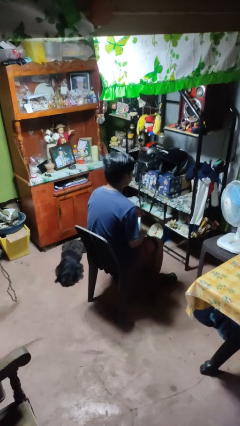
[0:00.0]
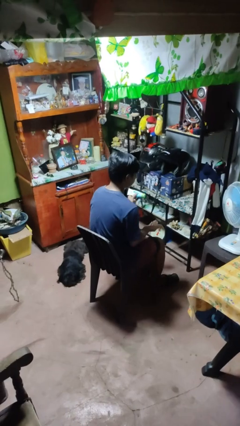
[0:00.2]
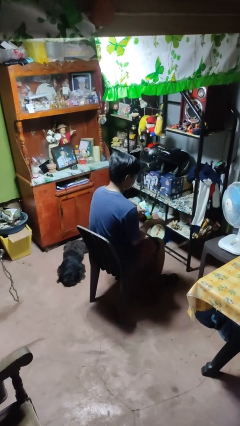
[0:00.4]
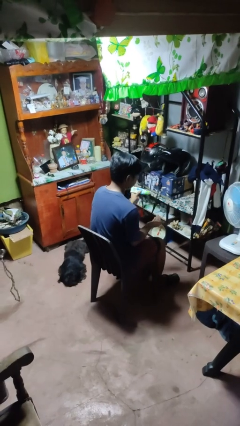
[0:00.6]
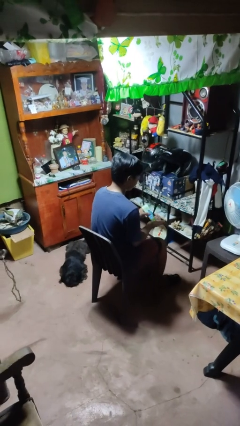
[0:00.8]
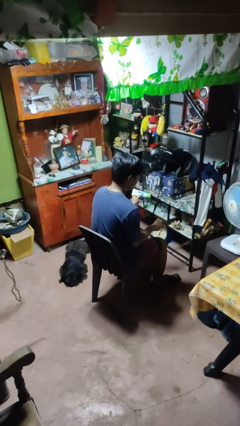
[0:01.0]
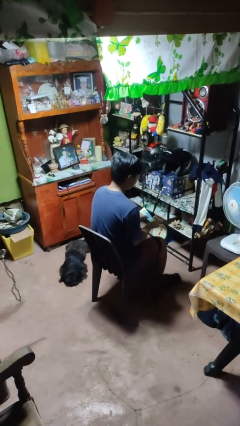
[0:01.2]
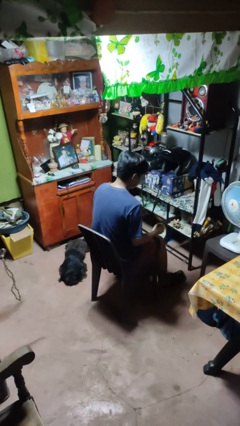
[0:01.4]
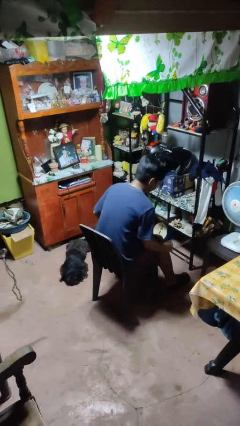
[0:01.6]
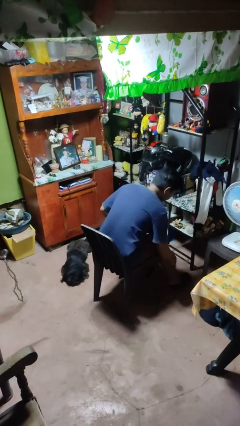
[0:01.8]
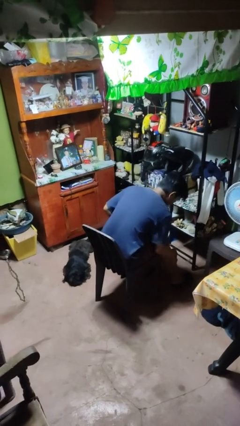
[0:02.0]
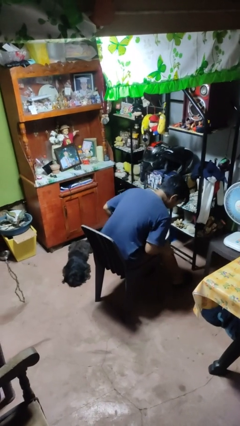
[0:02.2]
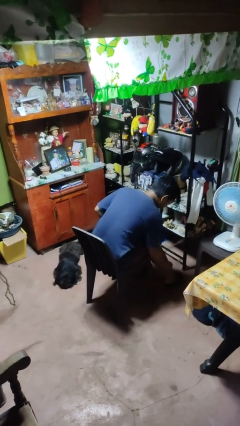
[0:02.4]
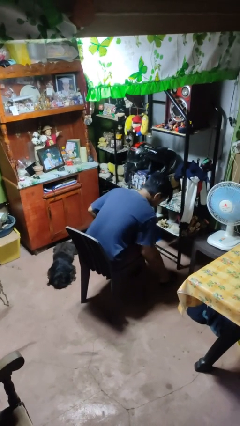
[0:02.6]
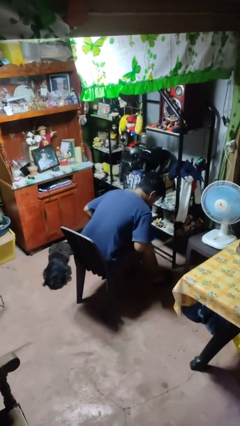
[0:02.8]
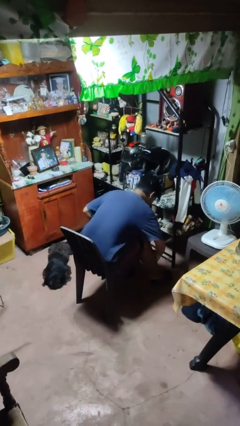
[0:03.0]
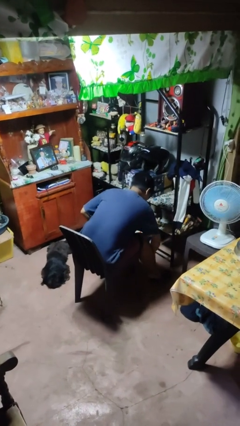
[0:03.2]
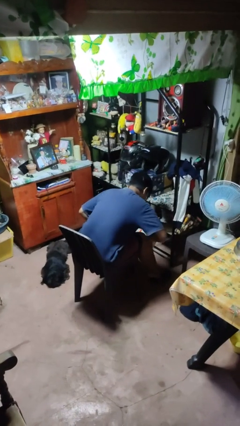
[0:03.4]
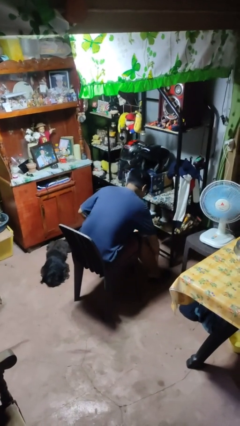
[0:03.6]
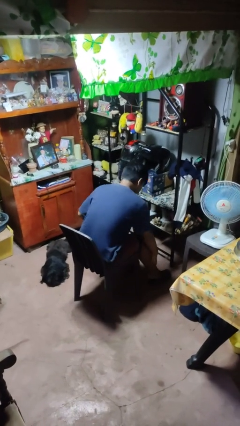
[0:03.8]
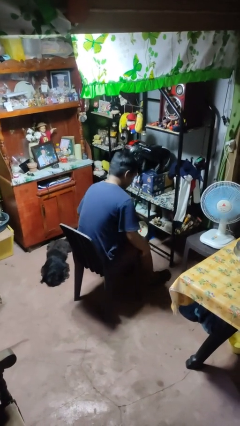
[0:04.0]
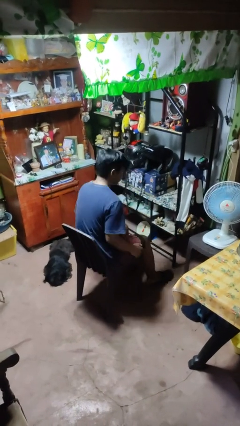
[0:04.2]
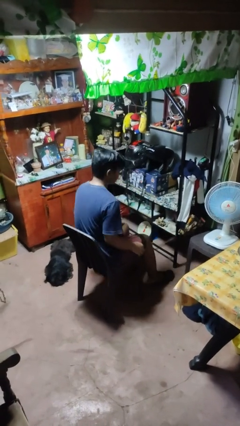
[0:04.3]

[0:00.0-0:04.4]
person applies sunscreen

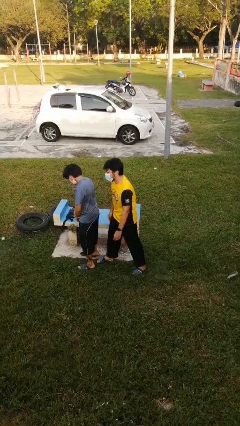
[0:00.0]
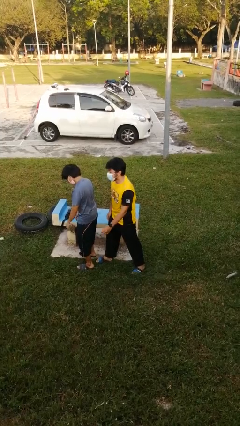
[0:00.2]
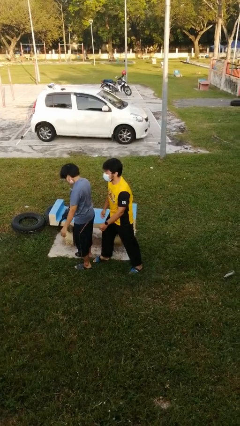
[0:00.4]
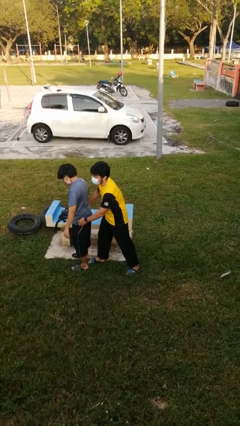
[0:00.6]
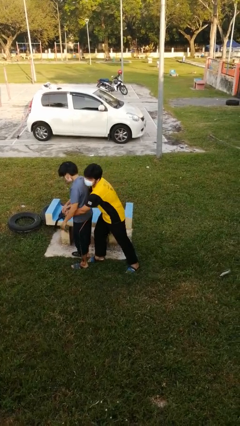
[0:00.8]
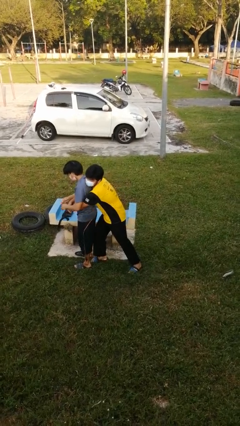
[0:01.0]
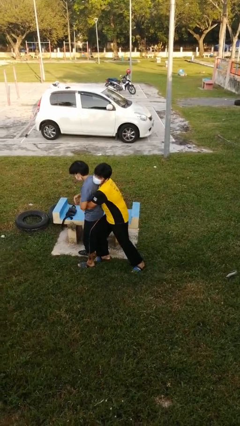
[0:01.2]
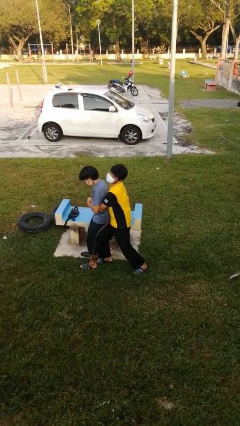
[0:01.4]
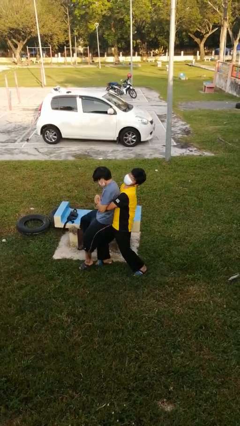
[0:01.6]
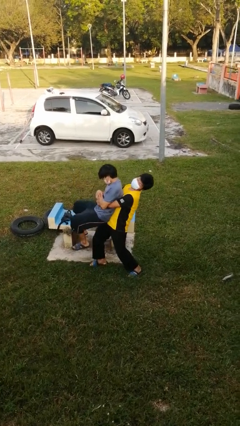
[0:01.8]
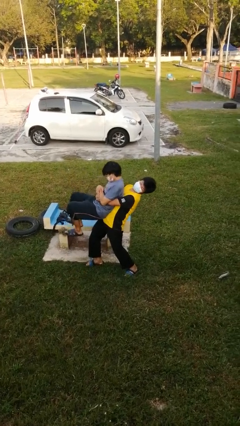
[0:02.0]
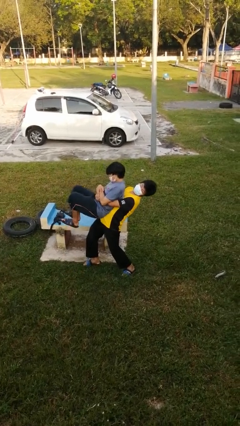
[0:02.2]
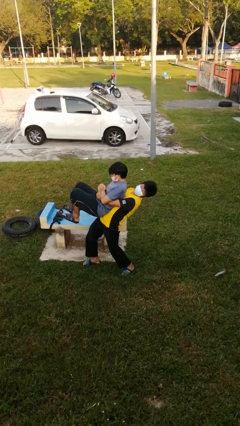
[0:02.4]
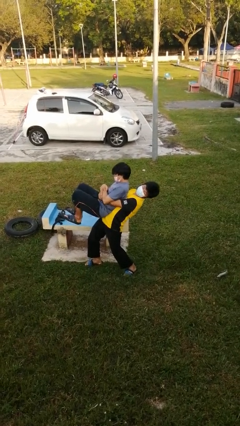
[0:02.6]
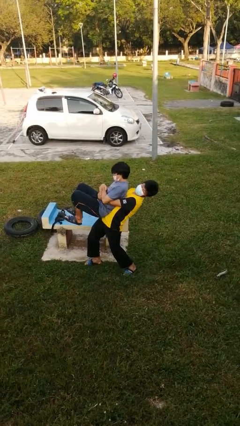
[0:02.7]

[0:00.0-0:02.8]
person picks up person

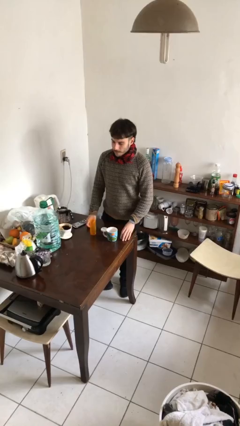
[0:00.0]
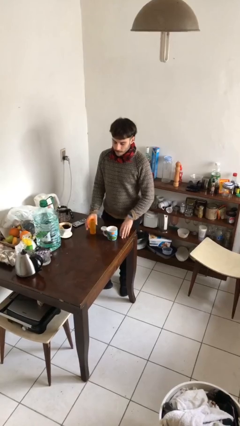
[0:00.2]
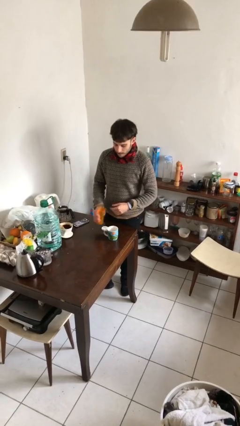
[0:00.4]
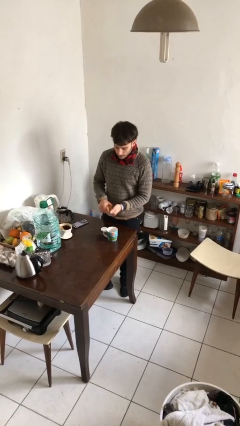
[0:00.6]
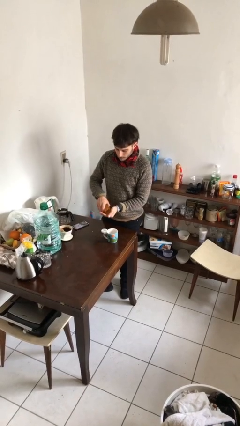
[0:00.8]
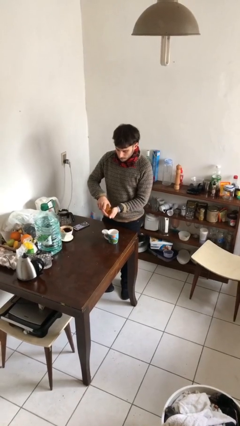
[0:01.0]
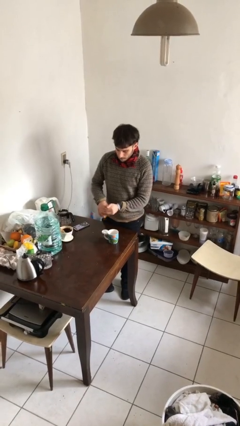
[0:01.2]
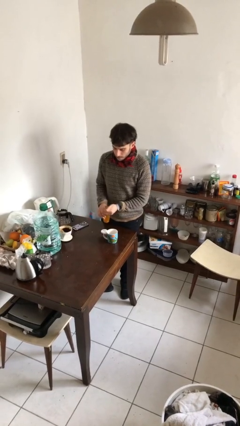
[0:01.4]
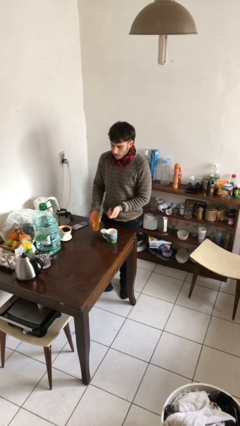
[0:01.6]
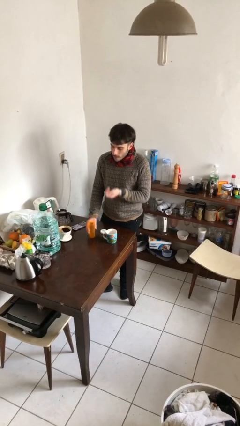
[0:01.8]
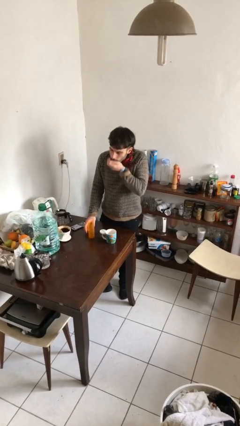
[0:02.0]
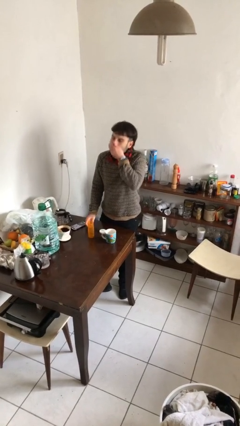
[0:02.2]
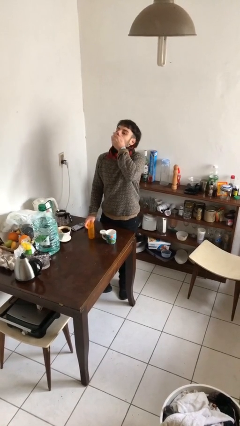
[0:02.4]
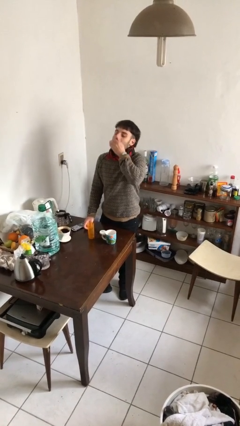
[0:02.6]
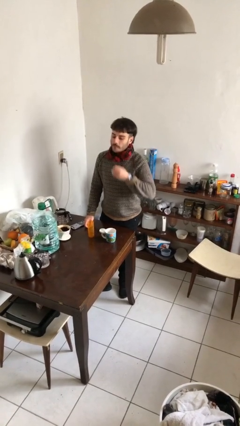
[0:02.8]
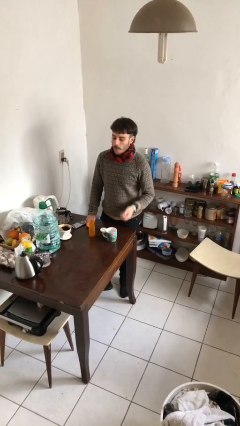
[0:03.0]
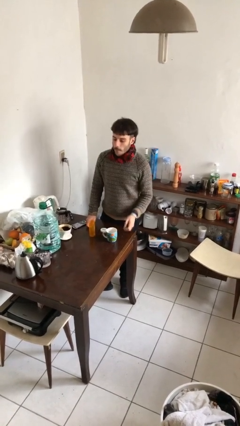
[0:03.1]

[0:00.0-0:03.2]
person takes medicine pills

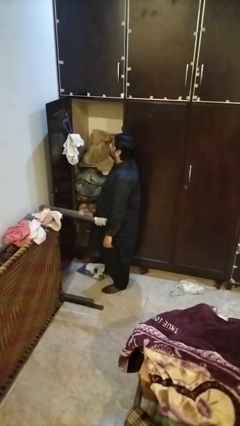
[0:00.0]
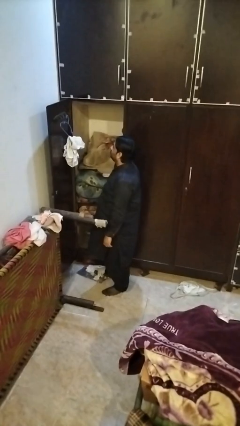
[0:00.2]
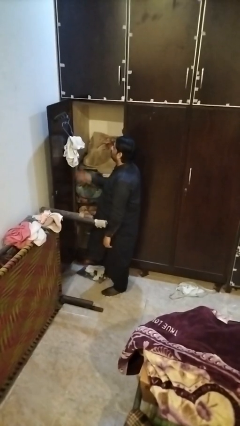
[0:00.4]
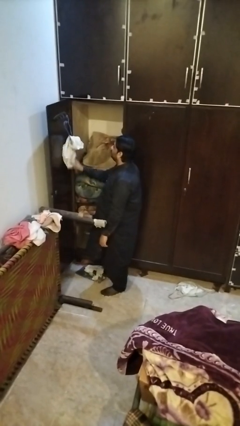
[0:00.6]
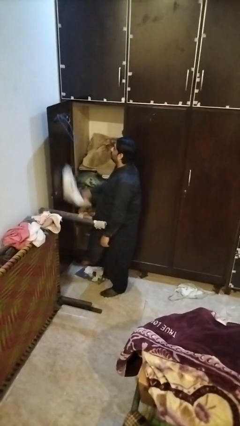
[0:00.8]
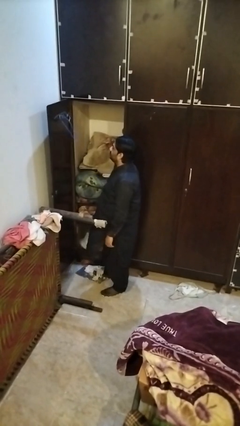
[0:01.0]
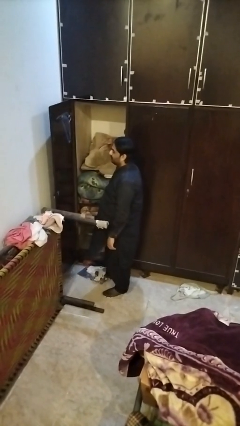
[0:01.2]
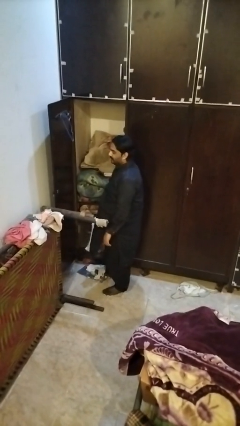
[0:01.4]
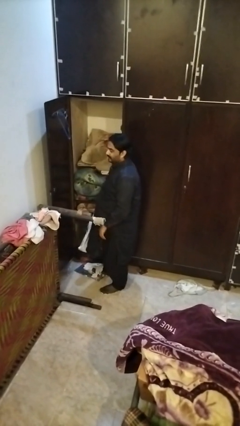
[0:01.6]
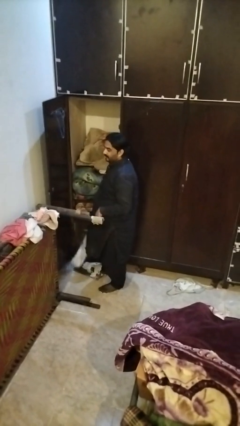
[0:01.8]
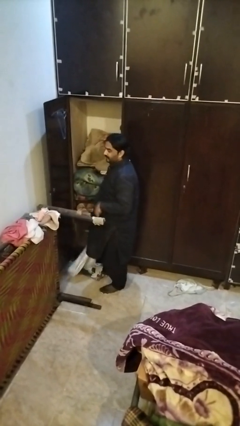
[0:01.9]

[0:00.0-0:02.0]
person takes clothes from closet

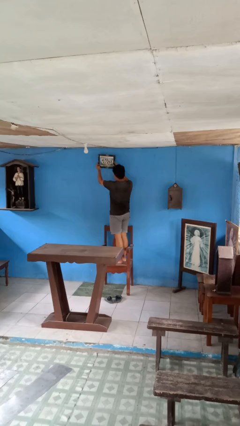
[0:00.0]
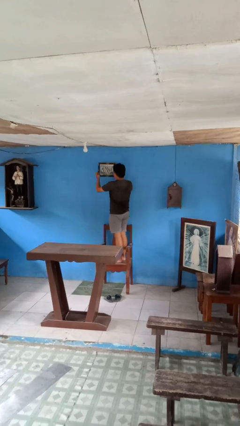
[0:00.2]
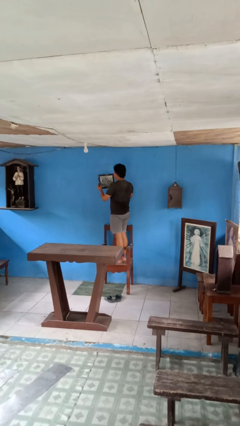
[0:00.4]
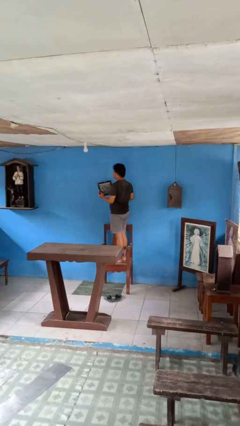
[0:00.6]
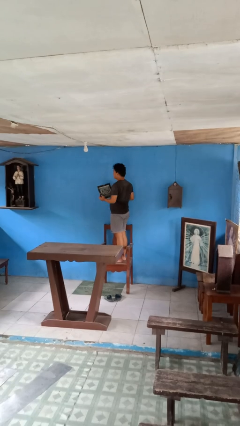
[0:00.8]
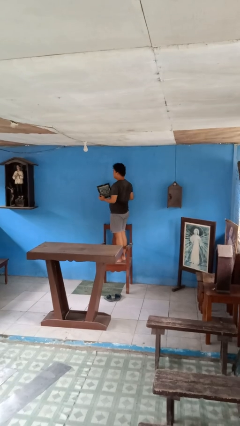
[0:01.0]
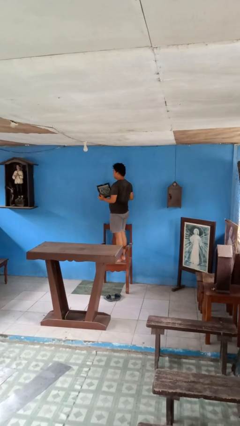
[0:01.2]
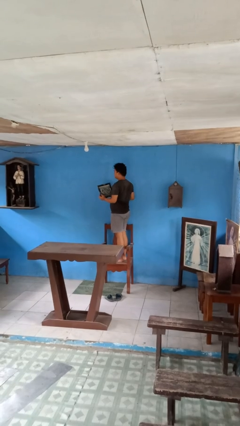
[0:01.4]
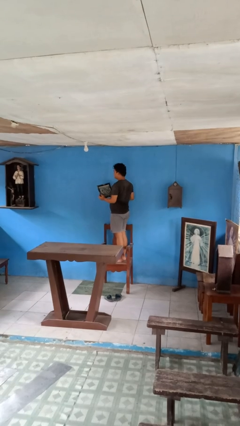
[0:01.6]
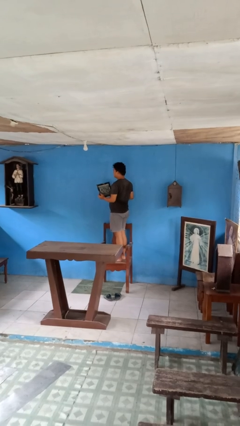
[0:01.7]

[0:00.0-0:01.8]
person takes down picture frame

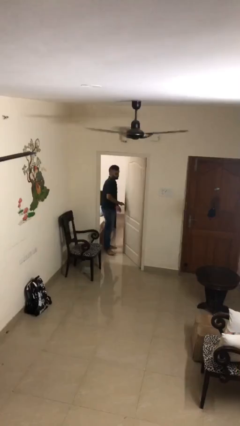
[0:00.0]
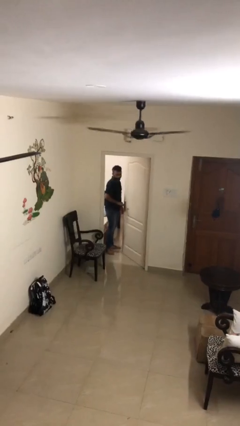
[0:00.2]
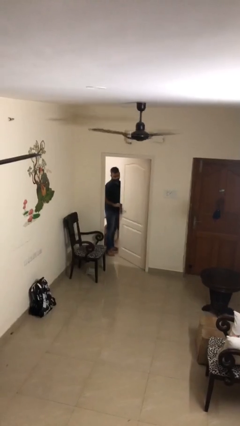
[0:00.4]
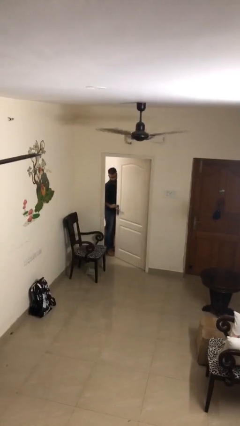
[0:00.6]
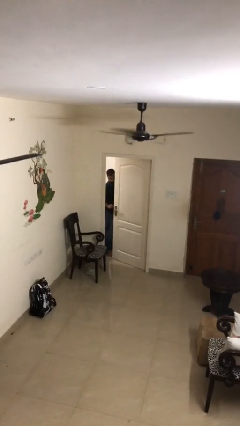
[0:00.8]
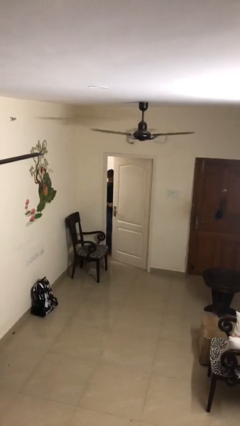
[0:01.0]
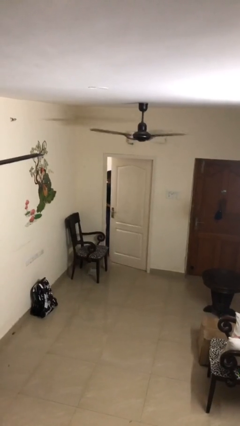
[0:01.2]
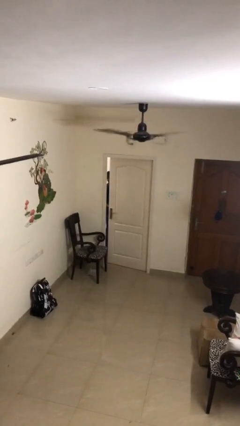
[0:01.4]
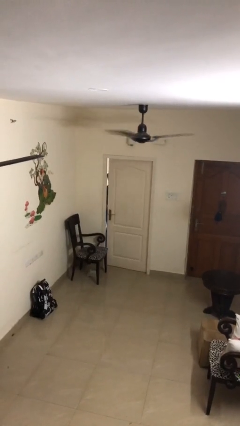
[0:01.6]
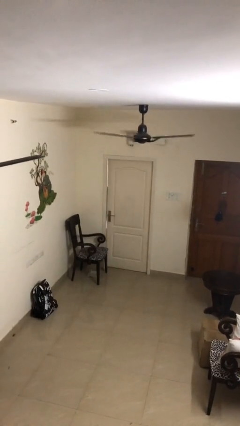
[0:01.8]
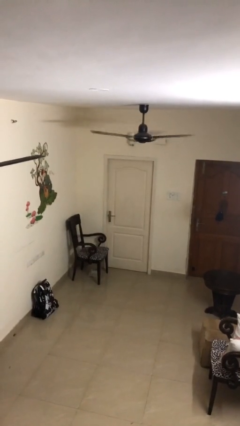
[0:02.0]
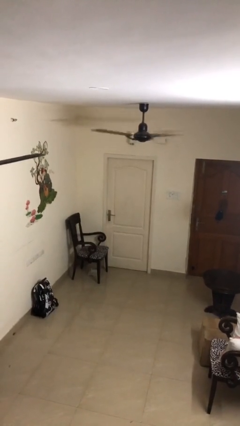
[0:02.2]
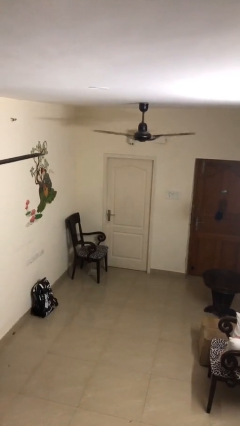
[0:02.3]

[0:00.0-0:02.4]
person closes facility door

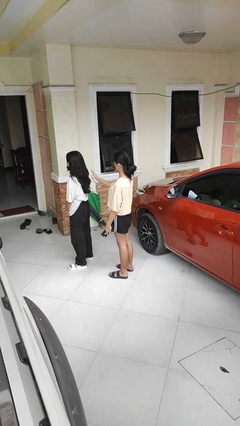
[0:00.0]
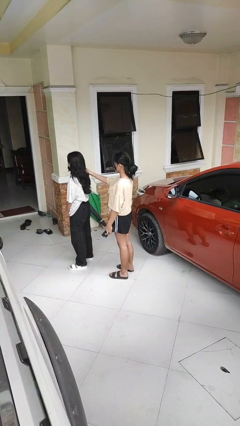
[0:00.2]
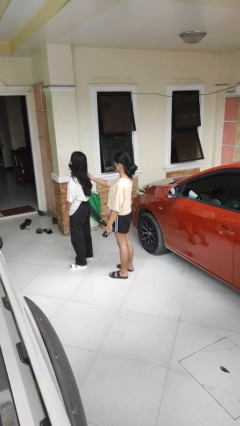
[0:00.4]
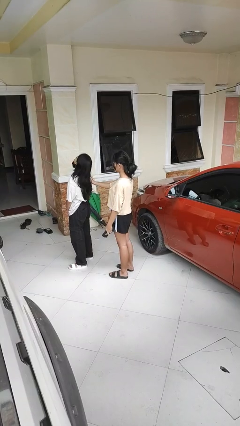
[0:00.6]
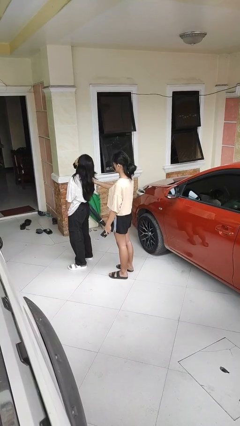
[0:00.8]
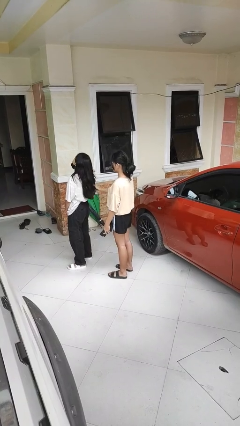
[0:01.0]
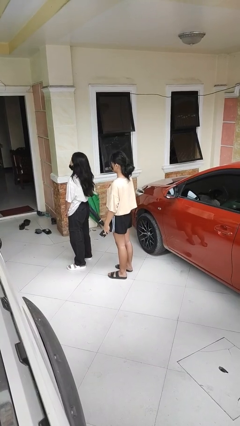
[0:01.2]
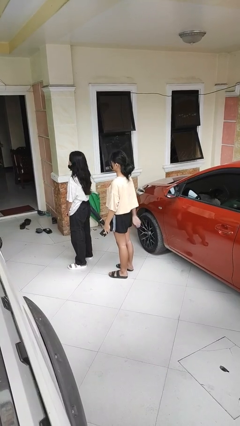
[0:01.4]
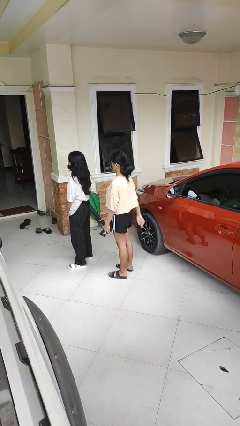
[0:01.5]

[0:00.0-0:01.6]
person grabs person by hair
